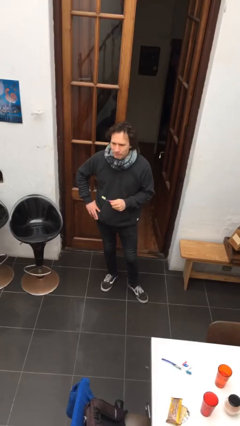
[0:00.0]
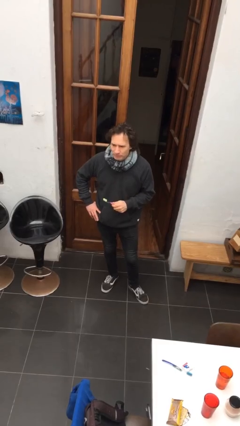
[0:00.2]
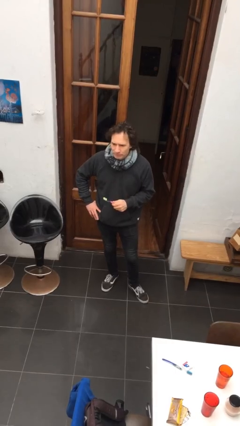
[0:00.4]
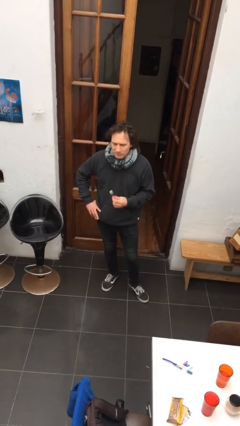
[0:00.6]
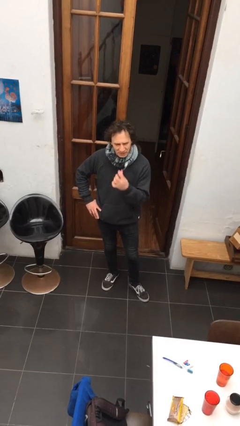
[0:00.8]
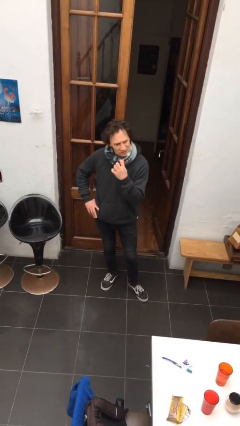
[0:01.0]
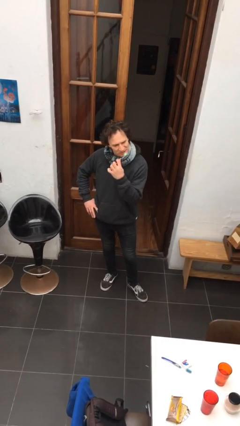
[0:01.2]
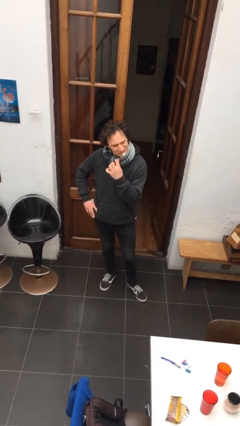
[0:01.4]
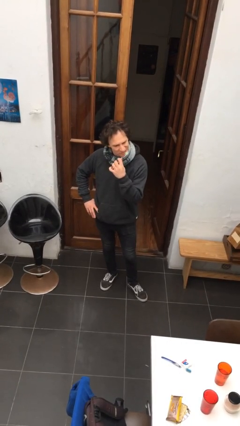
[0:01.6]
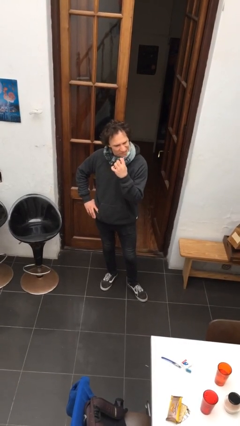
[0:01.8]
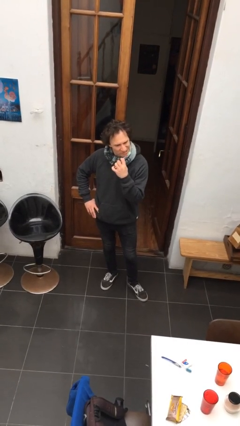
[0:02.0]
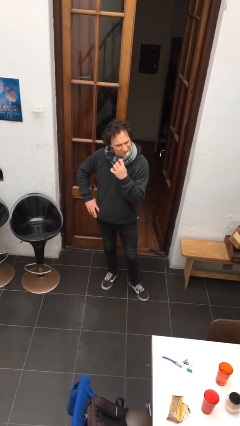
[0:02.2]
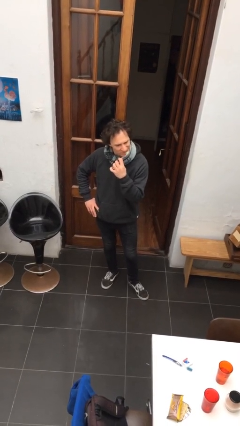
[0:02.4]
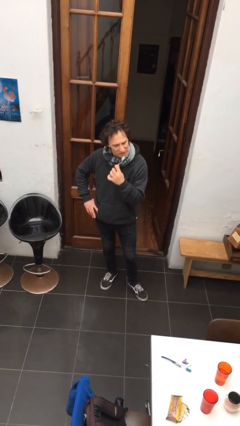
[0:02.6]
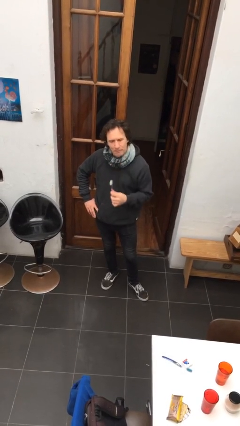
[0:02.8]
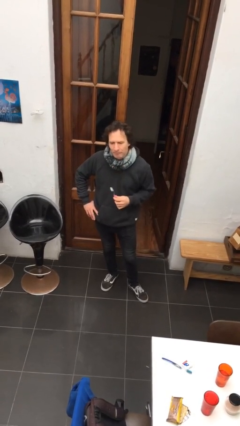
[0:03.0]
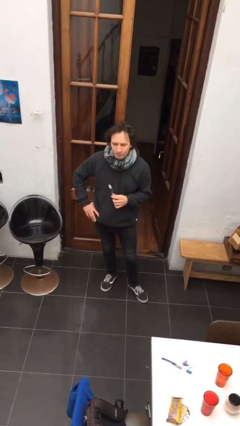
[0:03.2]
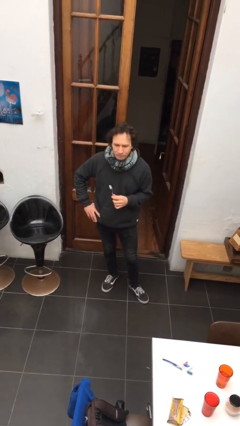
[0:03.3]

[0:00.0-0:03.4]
person brushes teeth

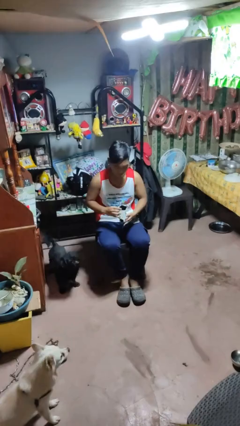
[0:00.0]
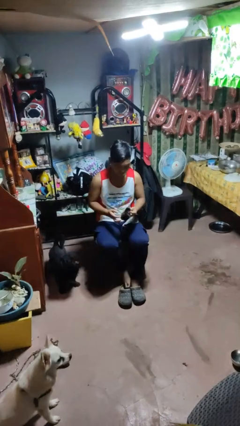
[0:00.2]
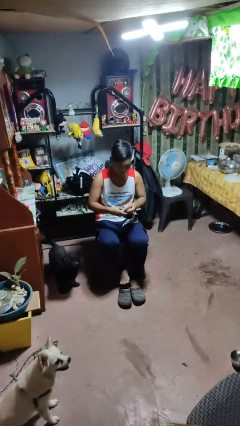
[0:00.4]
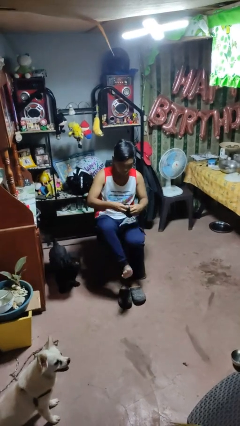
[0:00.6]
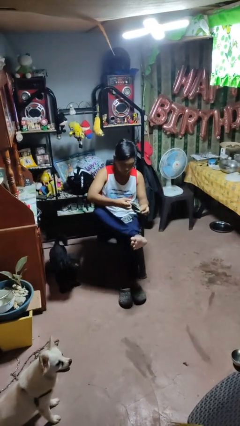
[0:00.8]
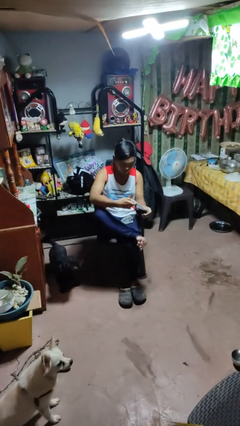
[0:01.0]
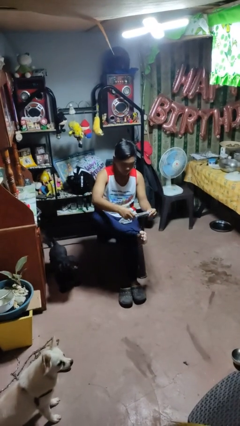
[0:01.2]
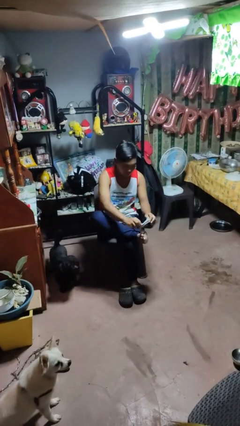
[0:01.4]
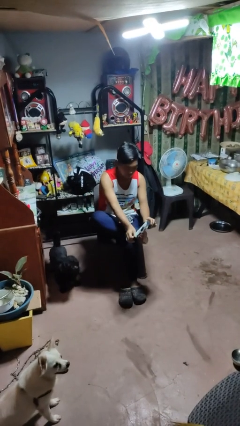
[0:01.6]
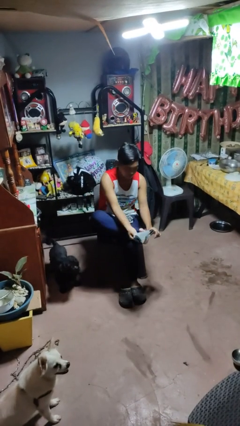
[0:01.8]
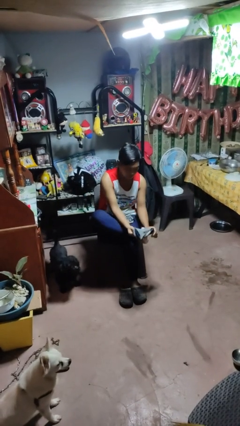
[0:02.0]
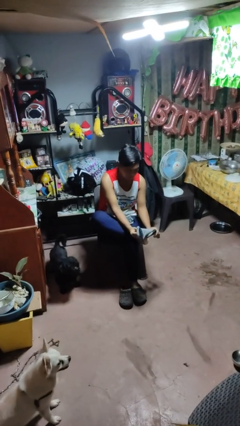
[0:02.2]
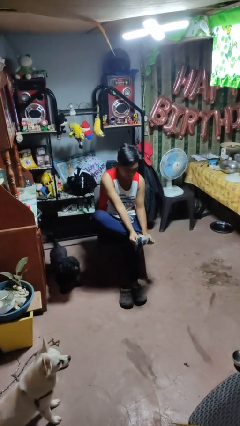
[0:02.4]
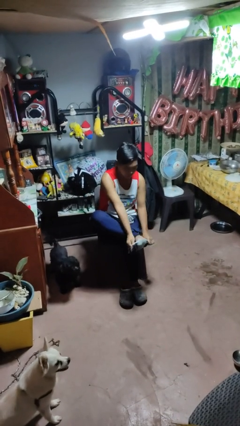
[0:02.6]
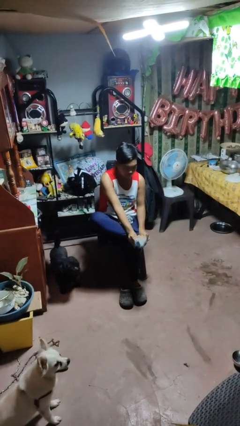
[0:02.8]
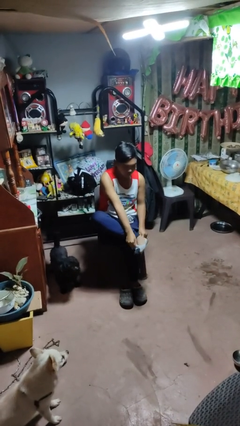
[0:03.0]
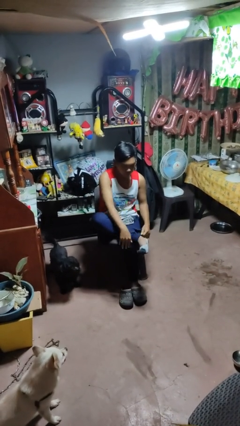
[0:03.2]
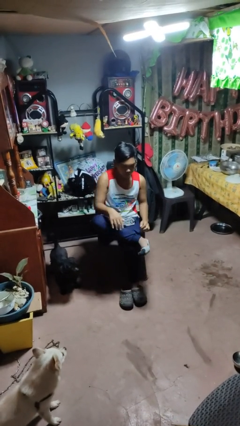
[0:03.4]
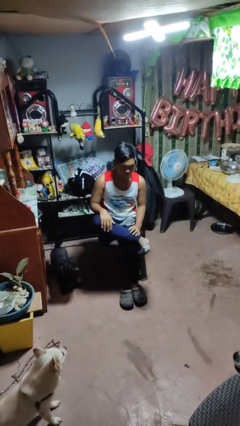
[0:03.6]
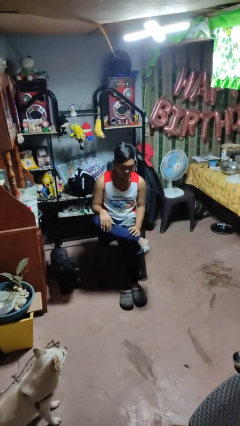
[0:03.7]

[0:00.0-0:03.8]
person puts on socks

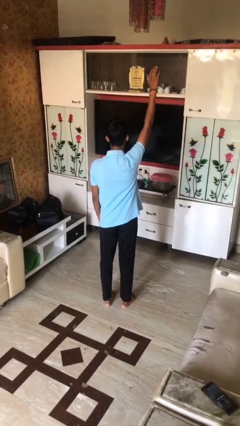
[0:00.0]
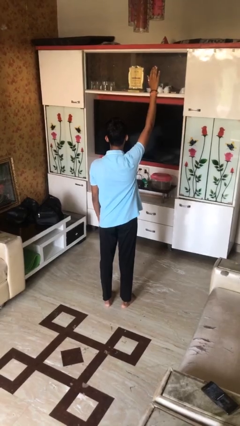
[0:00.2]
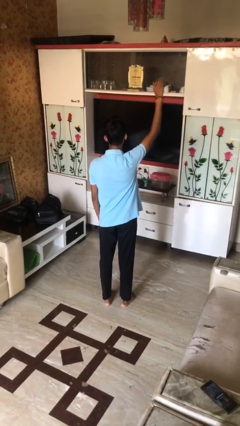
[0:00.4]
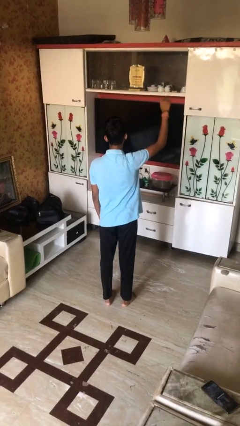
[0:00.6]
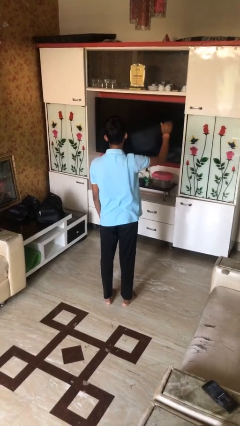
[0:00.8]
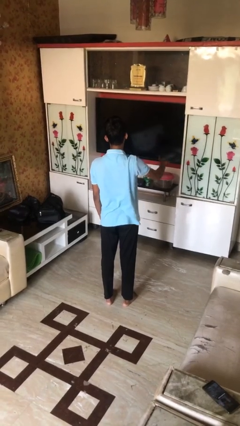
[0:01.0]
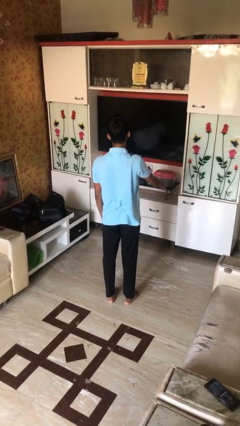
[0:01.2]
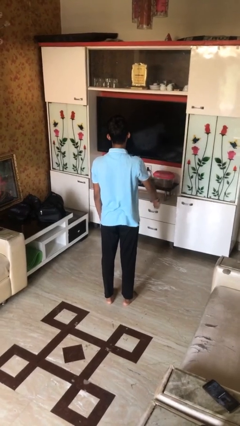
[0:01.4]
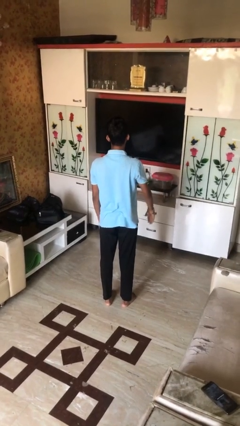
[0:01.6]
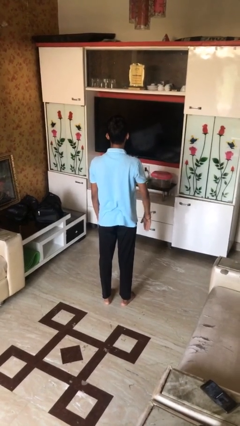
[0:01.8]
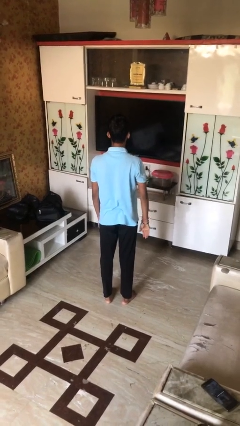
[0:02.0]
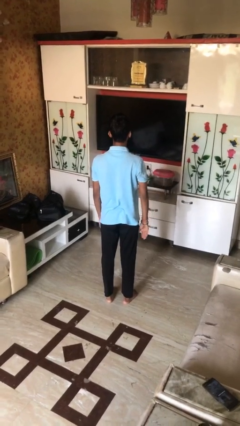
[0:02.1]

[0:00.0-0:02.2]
person gestures lower hand

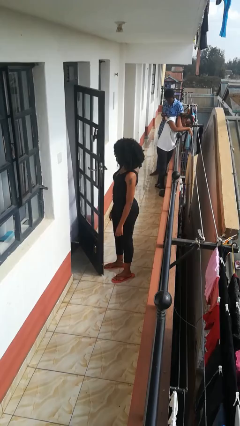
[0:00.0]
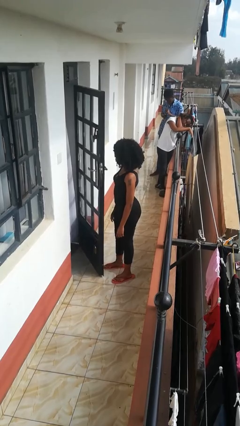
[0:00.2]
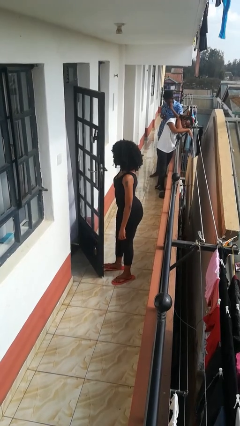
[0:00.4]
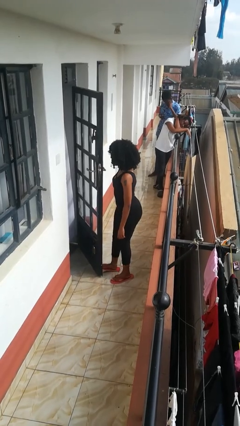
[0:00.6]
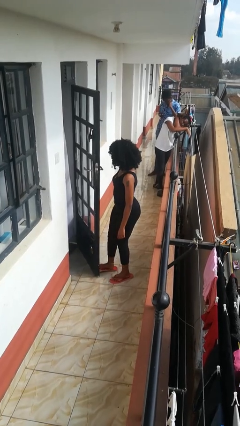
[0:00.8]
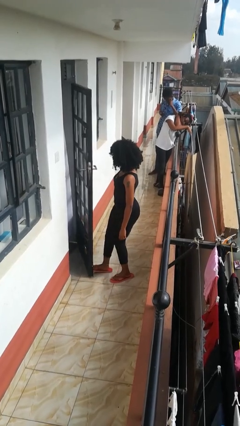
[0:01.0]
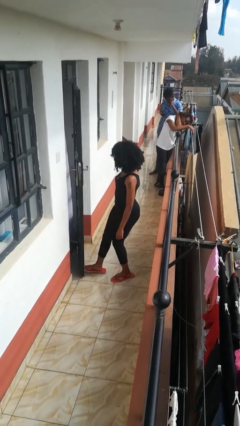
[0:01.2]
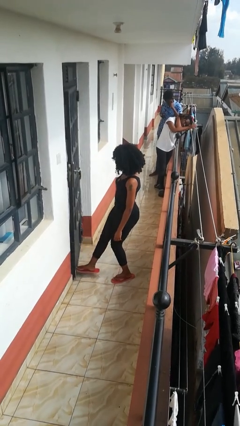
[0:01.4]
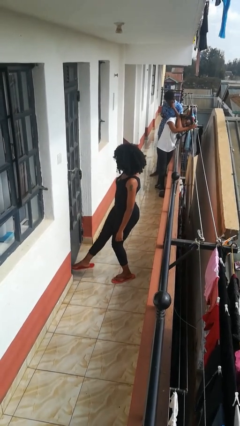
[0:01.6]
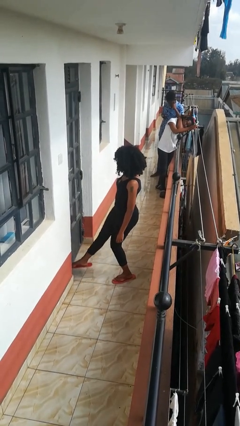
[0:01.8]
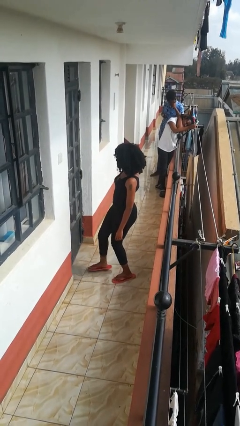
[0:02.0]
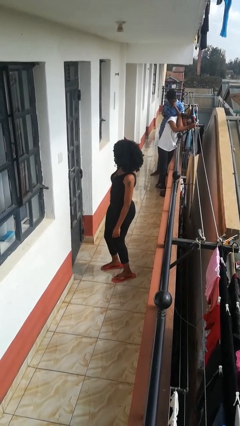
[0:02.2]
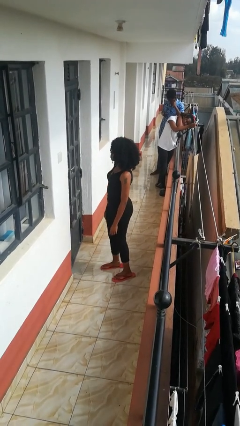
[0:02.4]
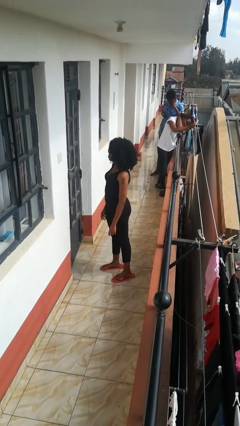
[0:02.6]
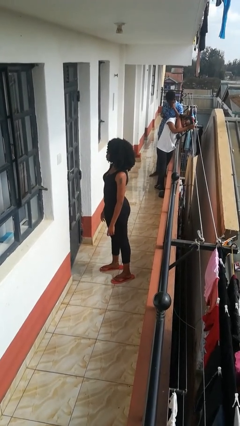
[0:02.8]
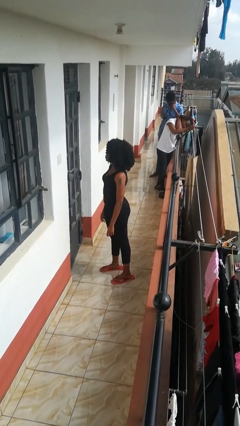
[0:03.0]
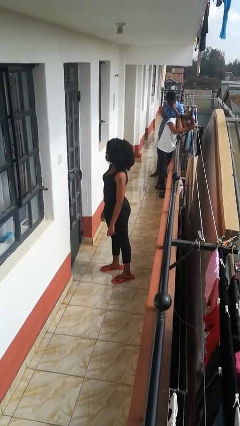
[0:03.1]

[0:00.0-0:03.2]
person closes door with foot

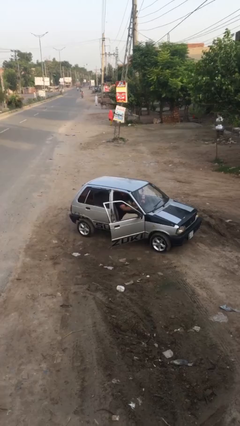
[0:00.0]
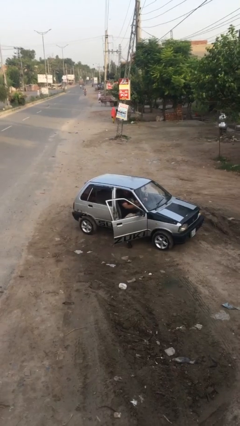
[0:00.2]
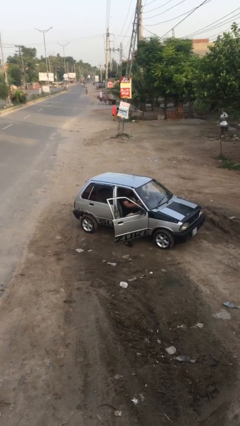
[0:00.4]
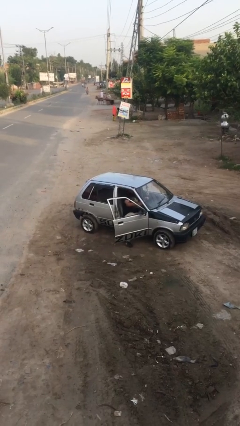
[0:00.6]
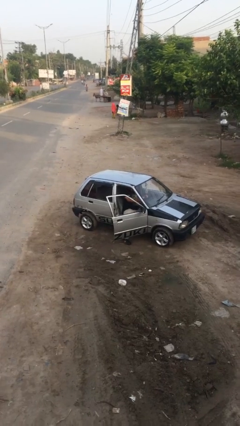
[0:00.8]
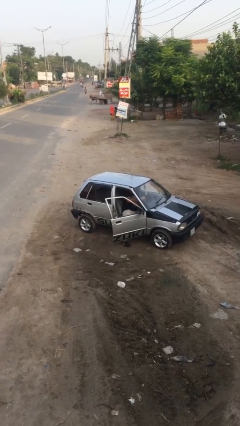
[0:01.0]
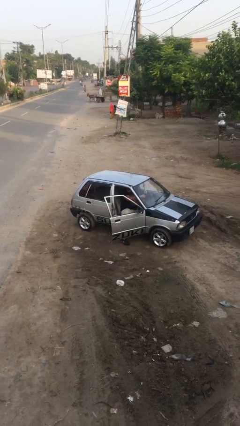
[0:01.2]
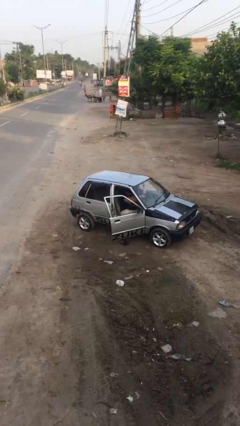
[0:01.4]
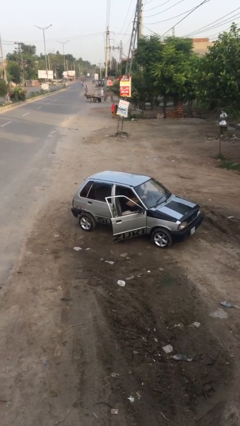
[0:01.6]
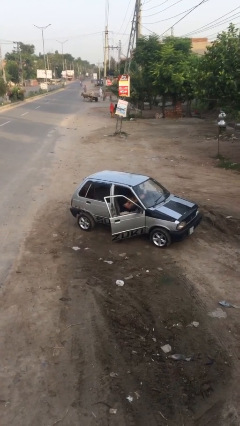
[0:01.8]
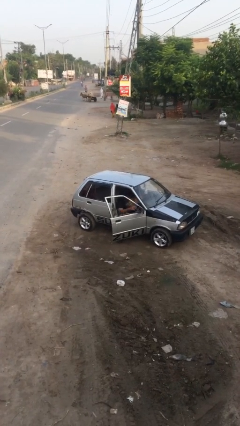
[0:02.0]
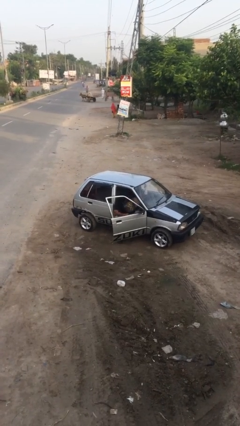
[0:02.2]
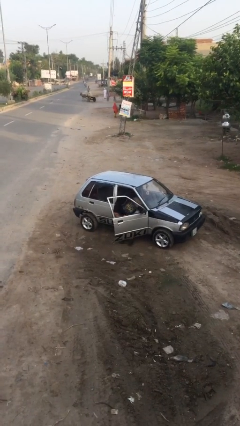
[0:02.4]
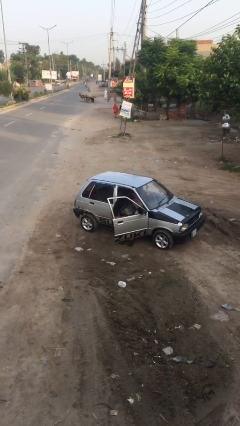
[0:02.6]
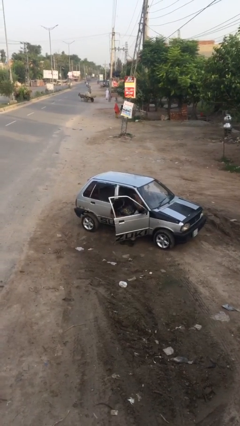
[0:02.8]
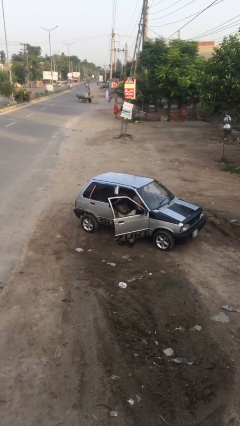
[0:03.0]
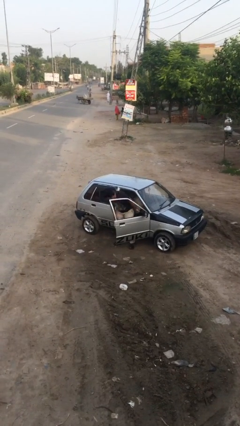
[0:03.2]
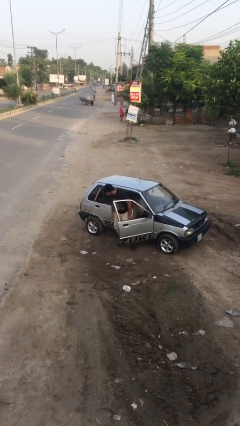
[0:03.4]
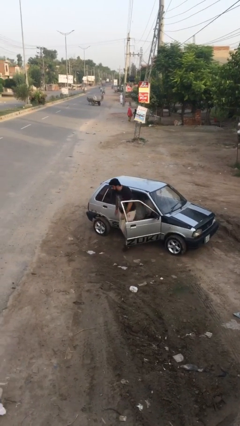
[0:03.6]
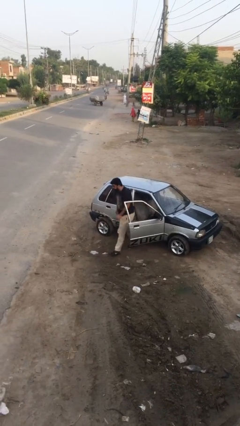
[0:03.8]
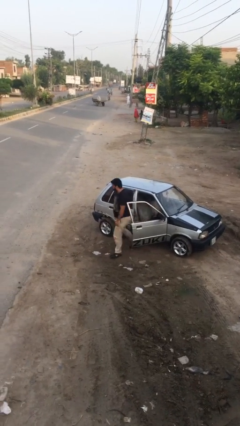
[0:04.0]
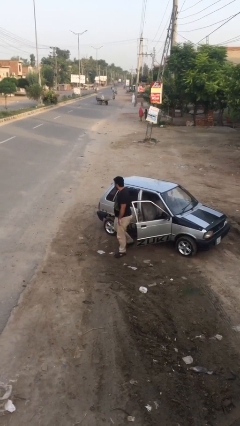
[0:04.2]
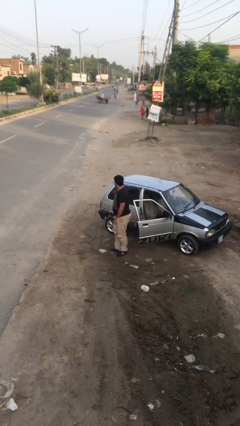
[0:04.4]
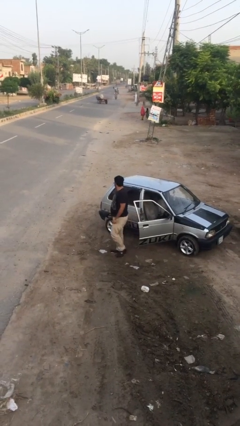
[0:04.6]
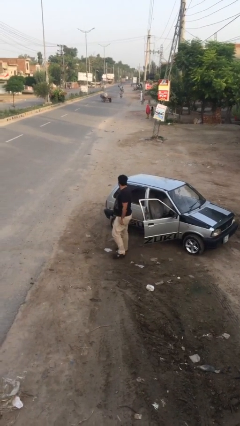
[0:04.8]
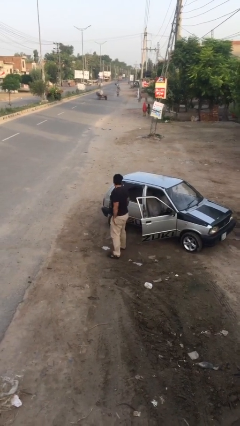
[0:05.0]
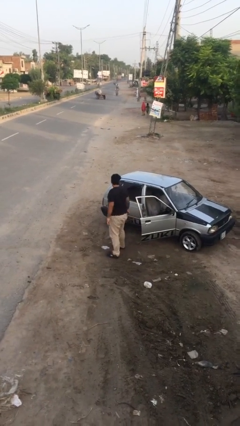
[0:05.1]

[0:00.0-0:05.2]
person exits car
